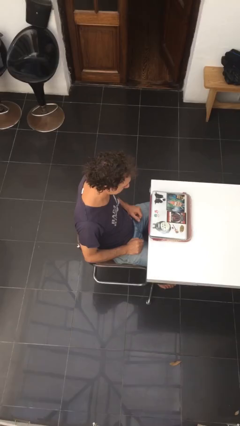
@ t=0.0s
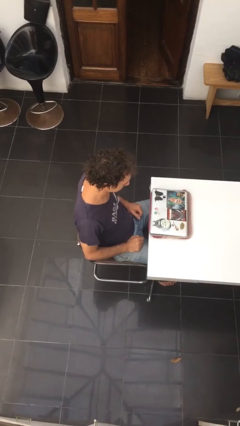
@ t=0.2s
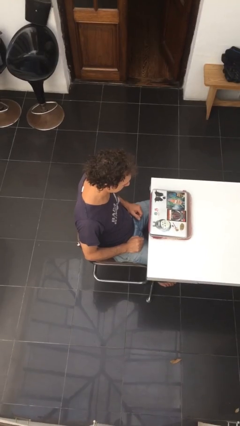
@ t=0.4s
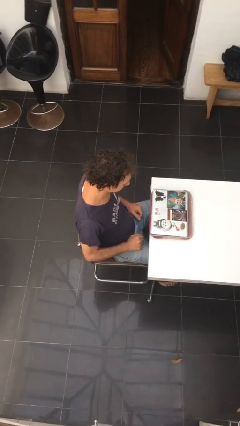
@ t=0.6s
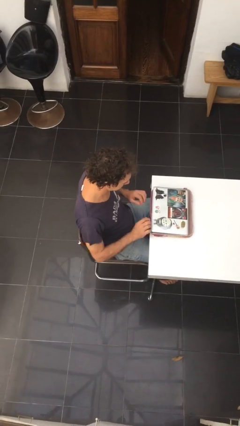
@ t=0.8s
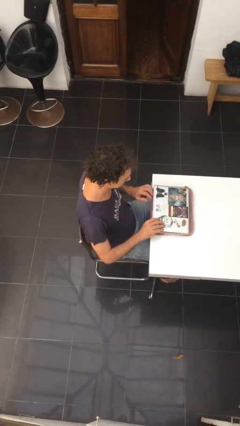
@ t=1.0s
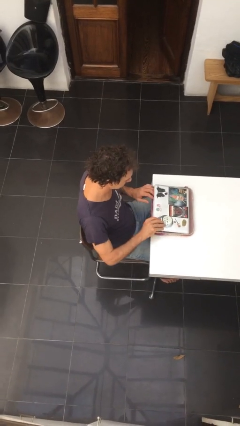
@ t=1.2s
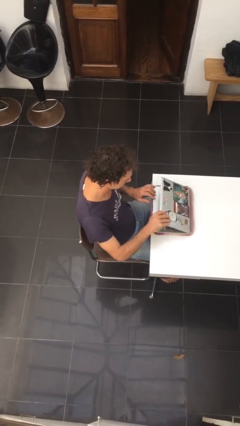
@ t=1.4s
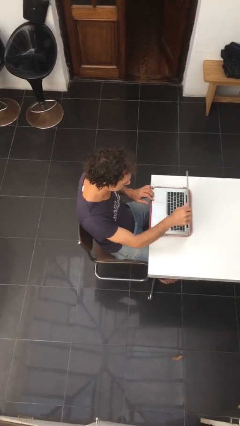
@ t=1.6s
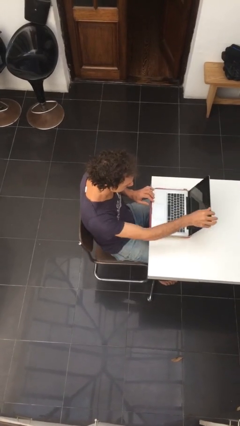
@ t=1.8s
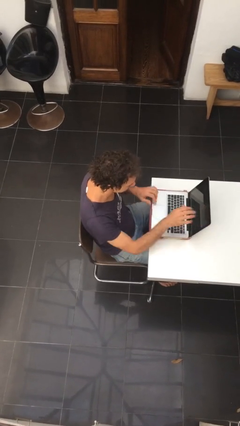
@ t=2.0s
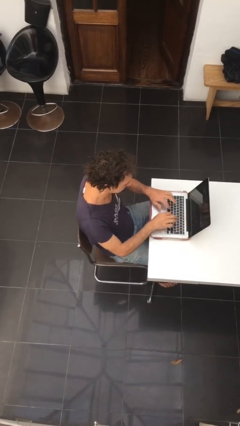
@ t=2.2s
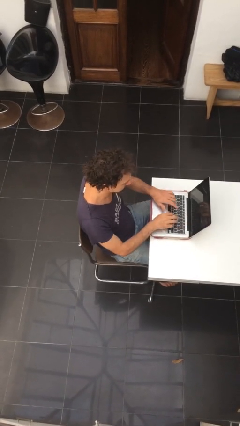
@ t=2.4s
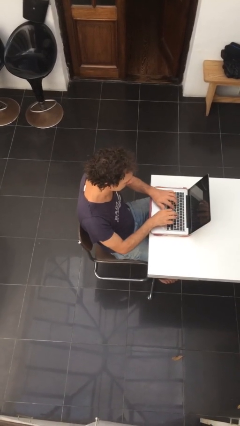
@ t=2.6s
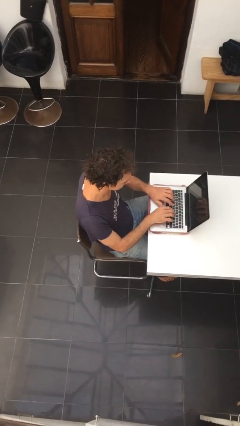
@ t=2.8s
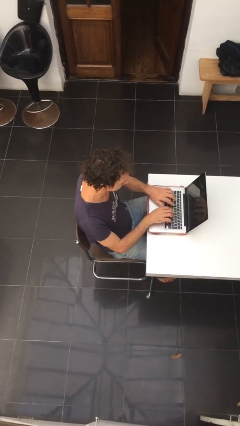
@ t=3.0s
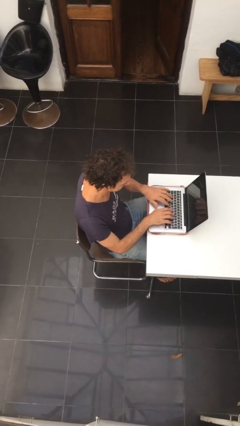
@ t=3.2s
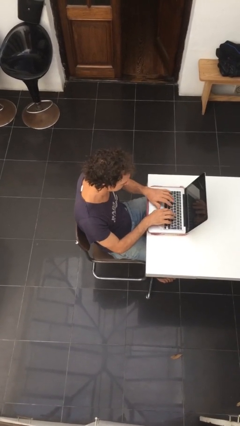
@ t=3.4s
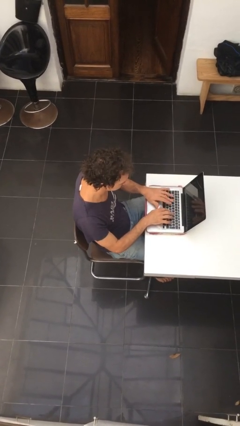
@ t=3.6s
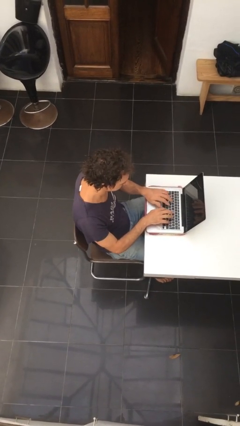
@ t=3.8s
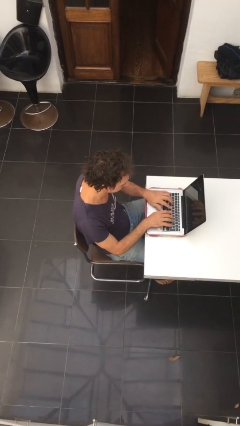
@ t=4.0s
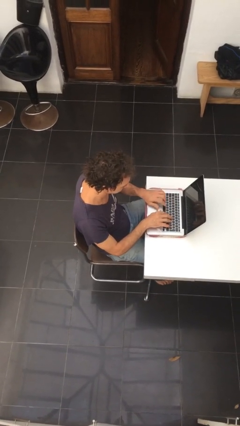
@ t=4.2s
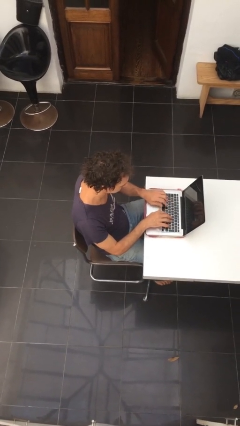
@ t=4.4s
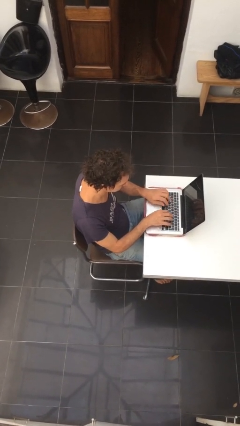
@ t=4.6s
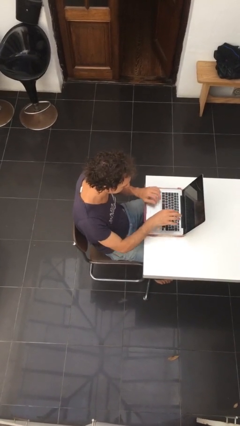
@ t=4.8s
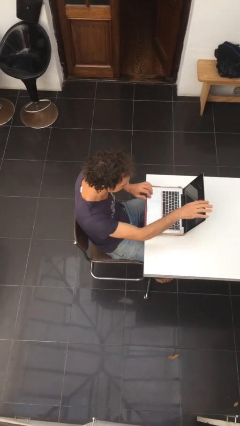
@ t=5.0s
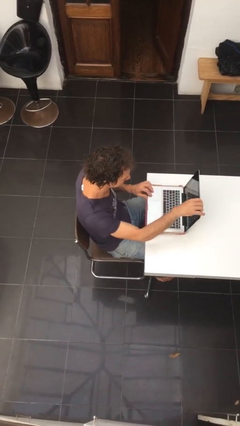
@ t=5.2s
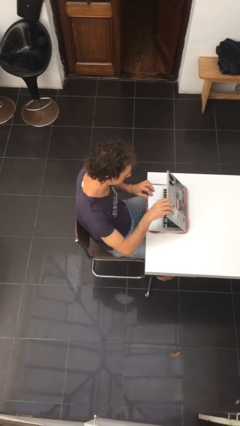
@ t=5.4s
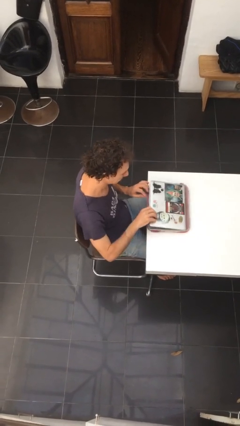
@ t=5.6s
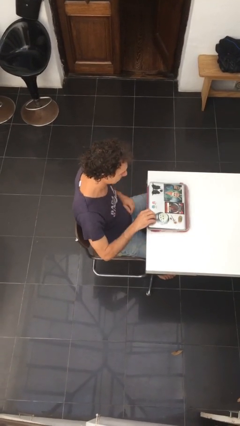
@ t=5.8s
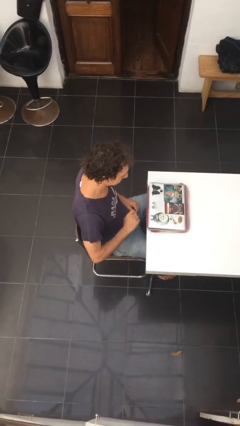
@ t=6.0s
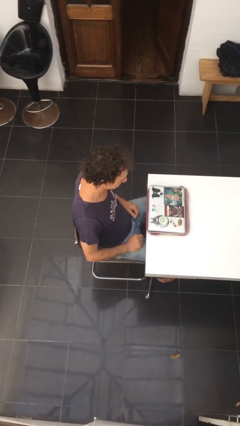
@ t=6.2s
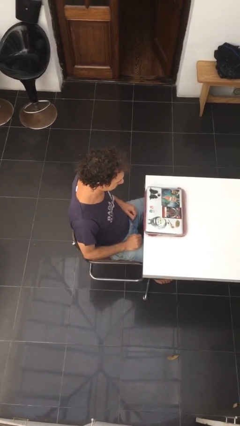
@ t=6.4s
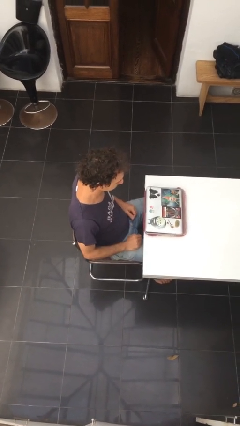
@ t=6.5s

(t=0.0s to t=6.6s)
person interacts with laptop

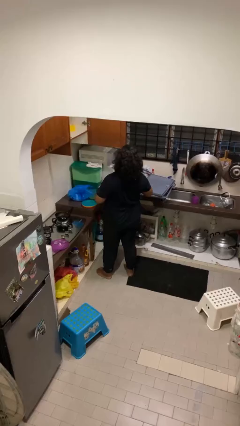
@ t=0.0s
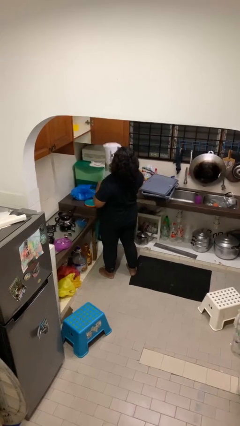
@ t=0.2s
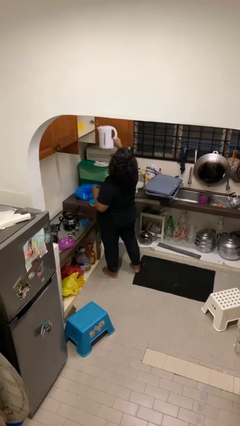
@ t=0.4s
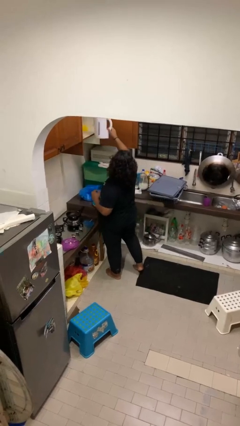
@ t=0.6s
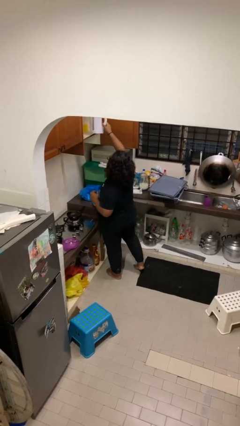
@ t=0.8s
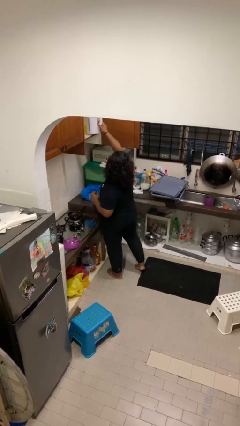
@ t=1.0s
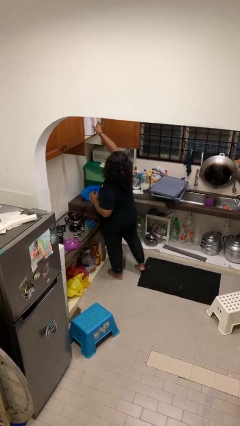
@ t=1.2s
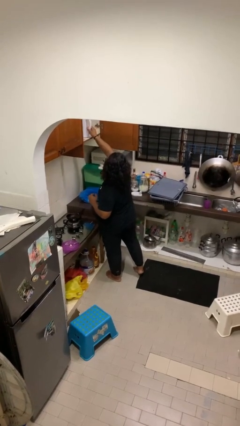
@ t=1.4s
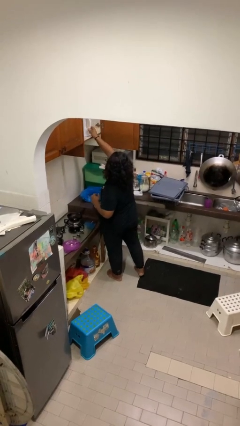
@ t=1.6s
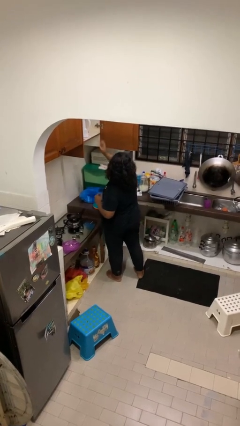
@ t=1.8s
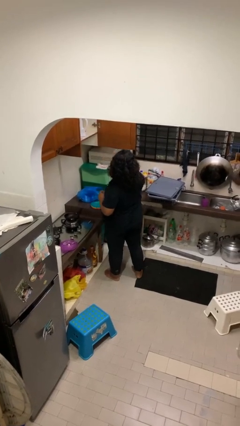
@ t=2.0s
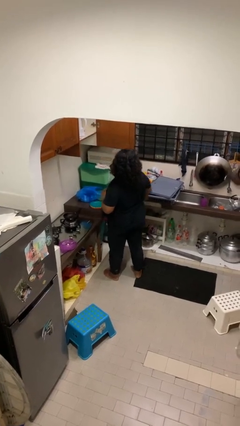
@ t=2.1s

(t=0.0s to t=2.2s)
person puts object in cabinet

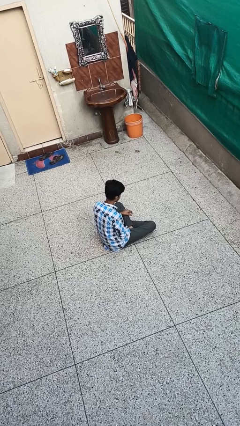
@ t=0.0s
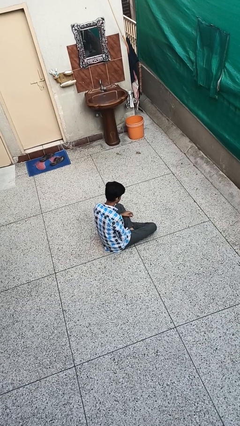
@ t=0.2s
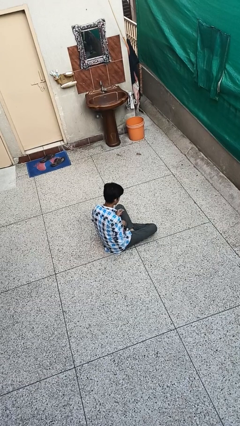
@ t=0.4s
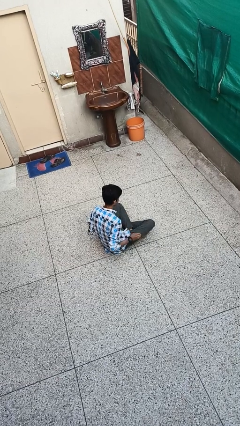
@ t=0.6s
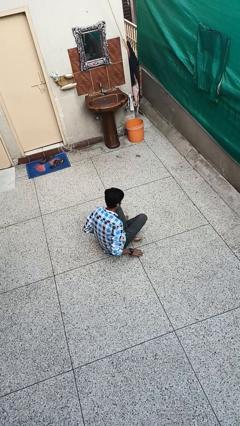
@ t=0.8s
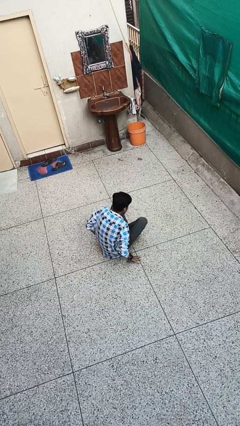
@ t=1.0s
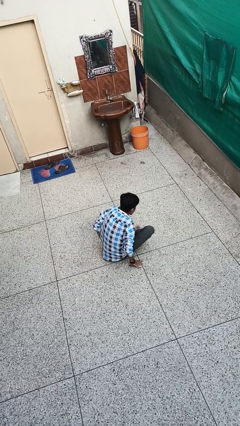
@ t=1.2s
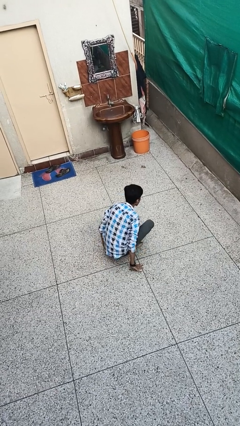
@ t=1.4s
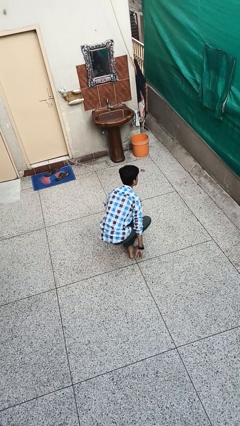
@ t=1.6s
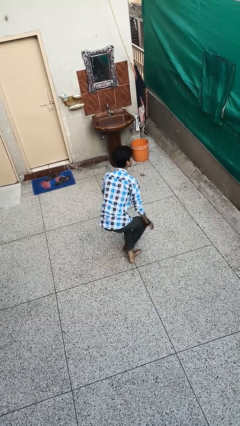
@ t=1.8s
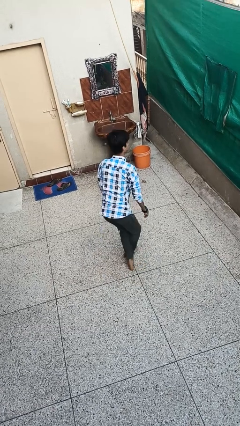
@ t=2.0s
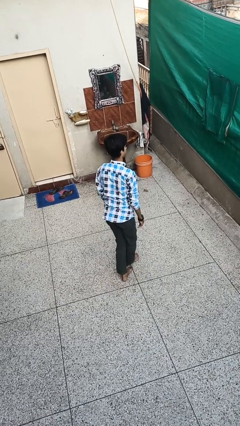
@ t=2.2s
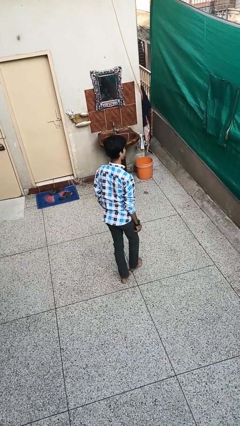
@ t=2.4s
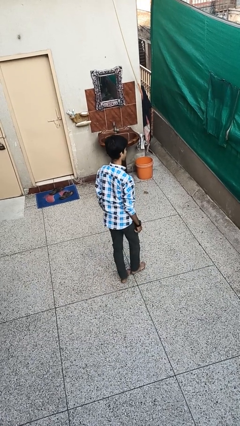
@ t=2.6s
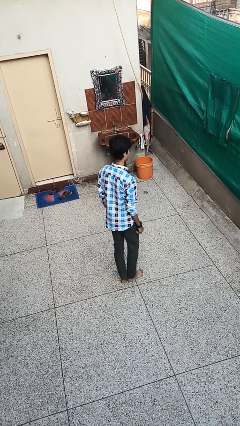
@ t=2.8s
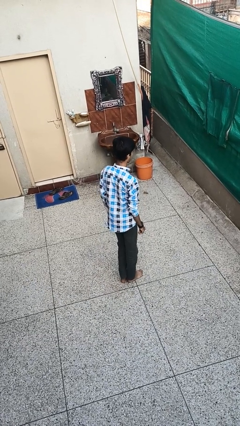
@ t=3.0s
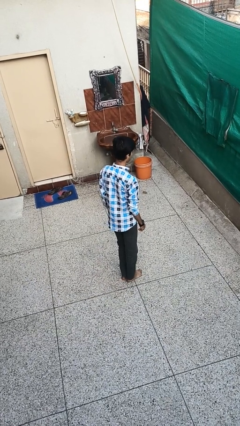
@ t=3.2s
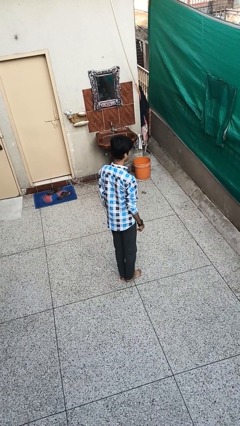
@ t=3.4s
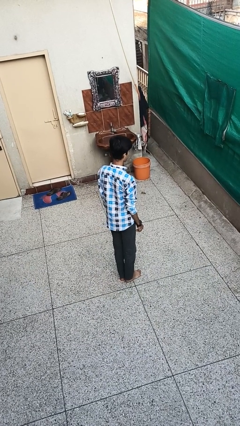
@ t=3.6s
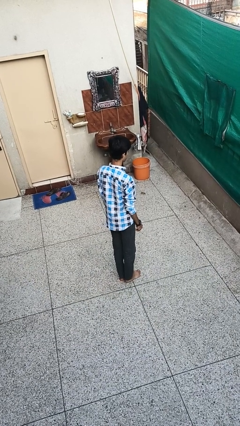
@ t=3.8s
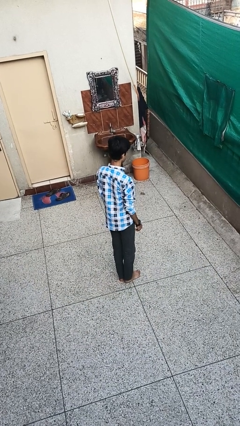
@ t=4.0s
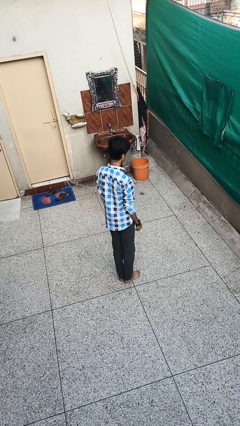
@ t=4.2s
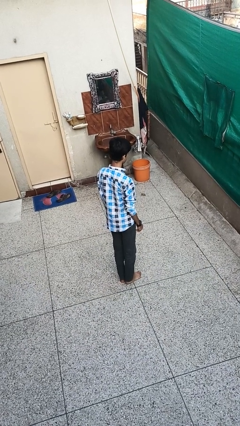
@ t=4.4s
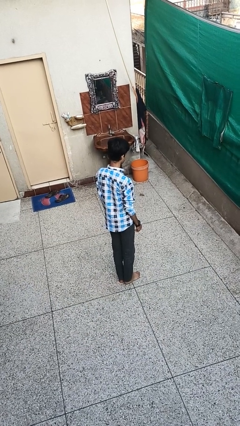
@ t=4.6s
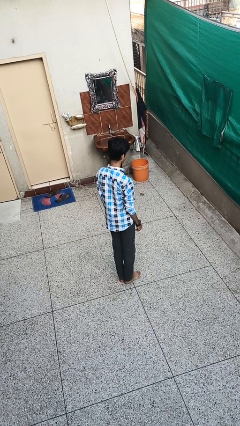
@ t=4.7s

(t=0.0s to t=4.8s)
person stands up from floor

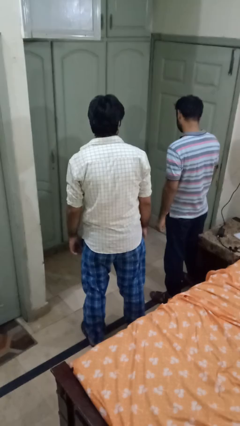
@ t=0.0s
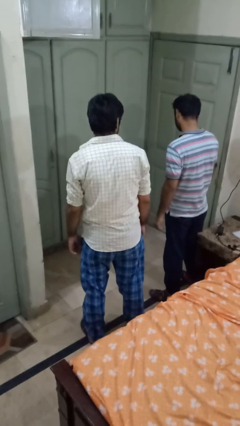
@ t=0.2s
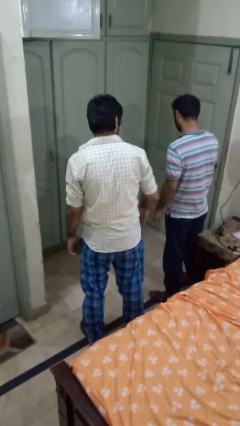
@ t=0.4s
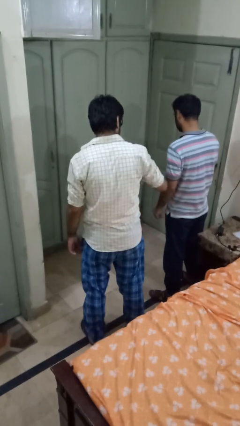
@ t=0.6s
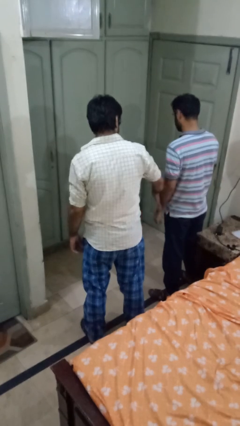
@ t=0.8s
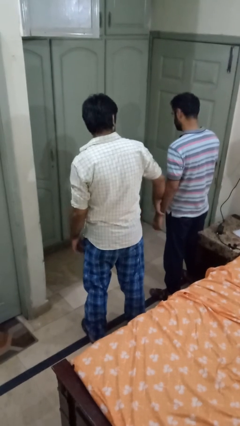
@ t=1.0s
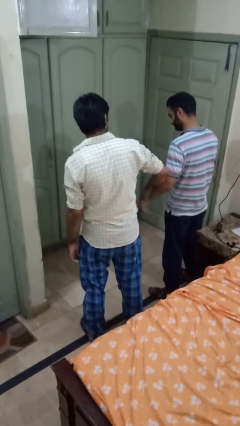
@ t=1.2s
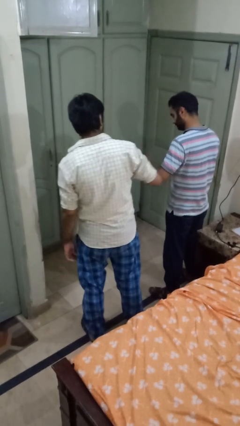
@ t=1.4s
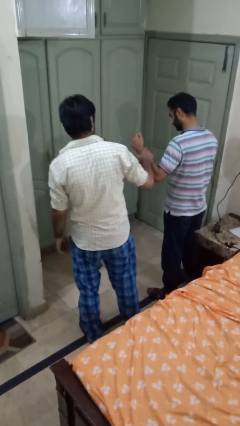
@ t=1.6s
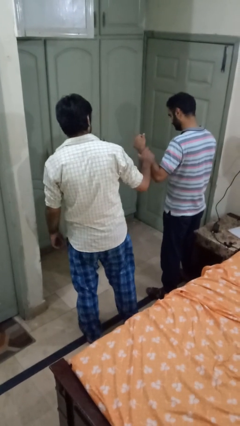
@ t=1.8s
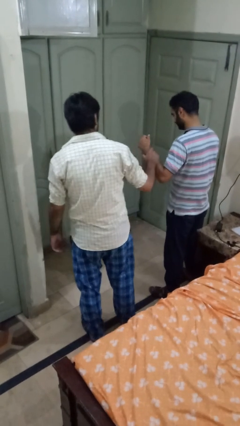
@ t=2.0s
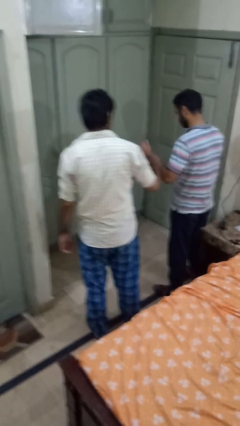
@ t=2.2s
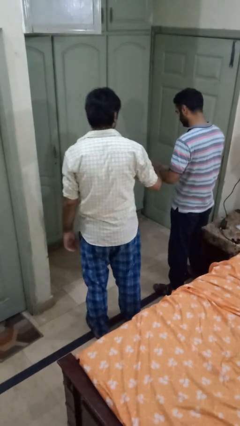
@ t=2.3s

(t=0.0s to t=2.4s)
person grabs person by forearm

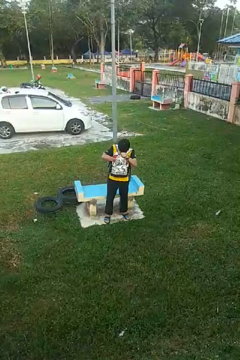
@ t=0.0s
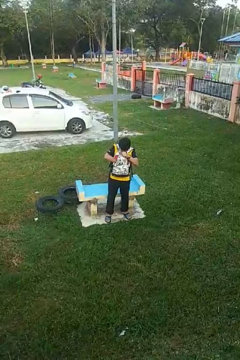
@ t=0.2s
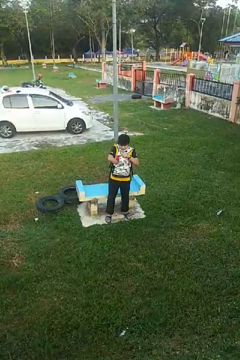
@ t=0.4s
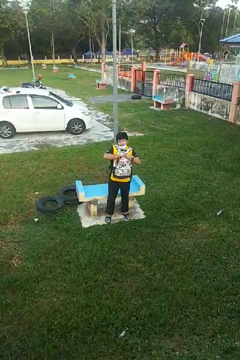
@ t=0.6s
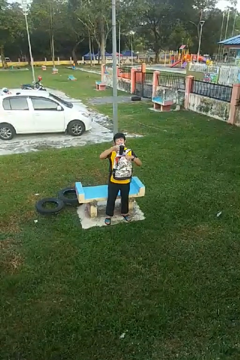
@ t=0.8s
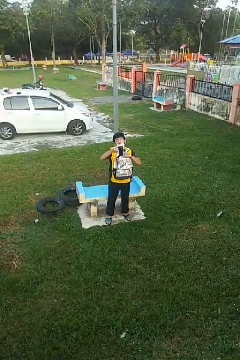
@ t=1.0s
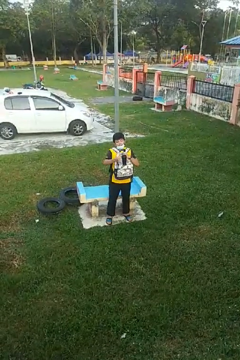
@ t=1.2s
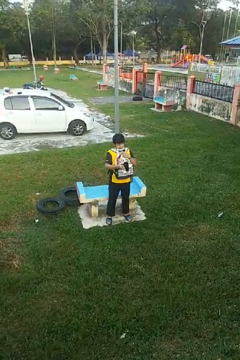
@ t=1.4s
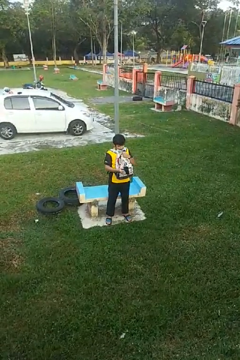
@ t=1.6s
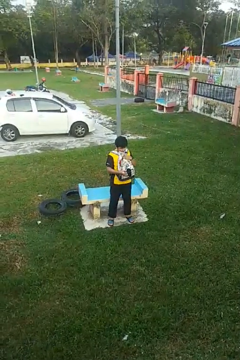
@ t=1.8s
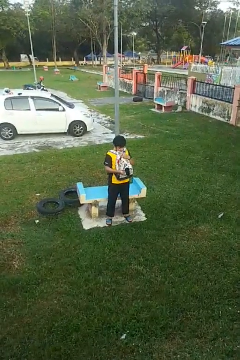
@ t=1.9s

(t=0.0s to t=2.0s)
person takes object from backpack
